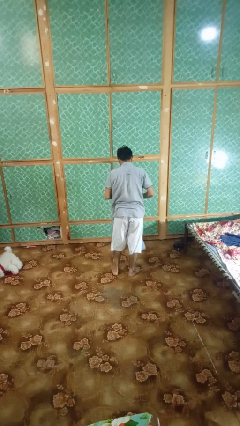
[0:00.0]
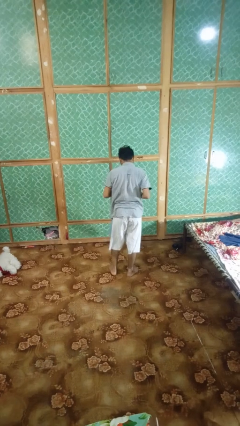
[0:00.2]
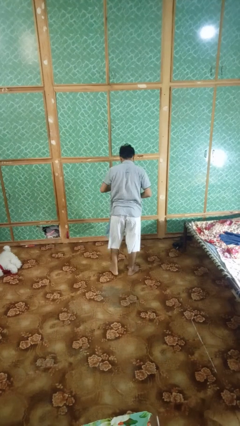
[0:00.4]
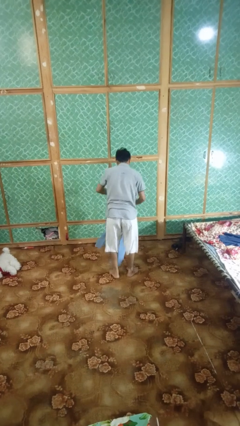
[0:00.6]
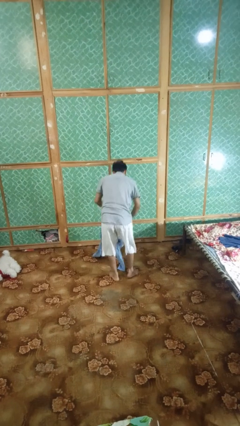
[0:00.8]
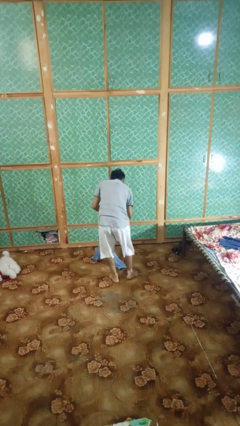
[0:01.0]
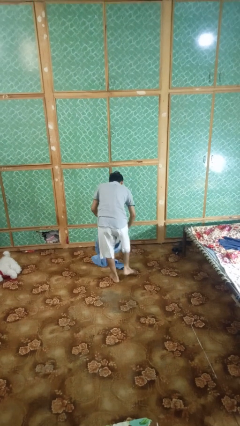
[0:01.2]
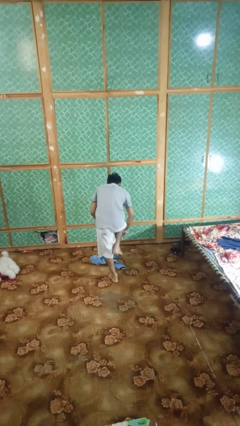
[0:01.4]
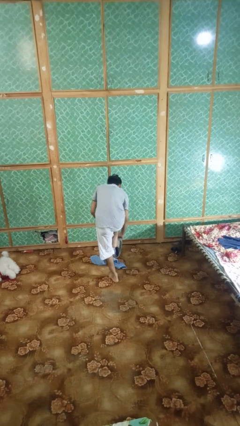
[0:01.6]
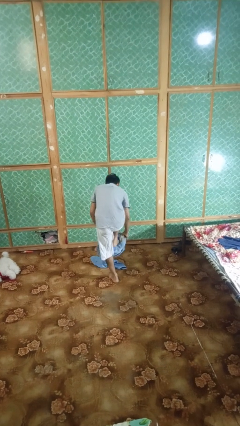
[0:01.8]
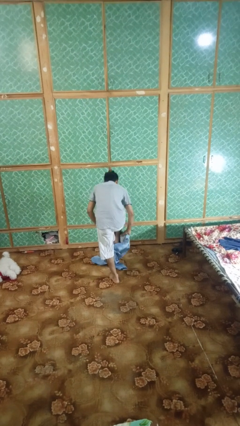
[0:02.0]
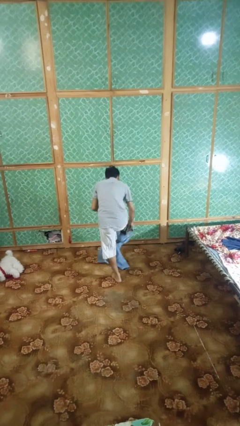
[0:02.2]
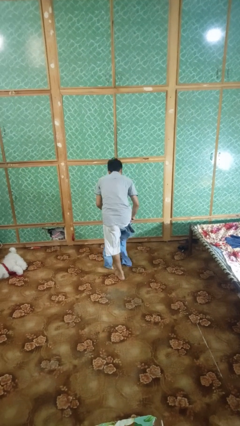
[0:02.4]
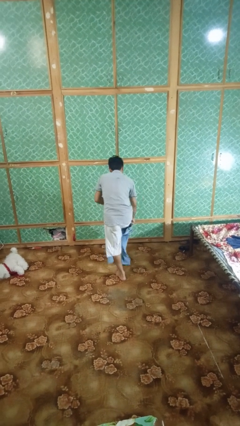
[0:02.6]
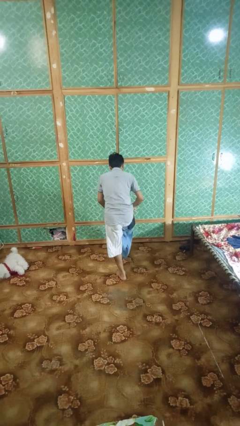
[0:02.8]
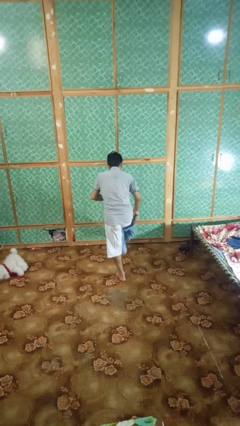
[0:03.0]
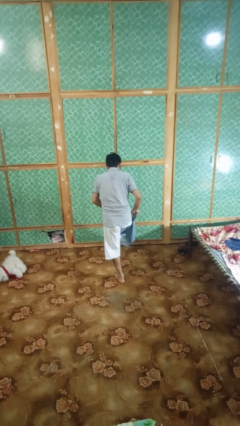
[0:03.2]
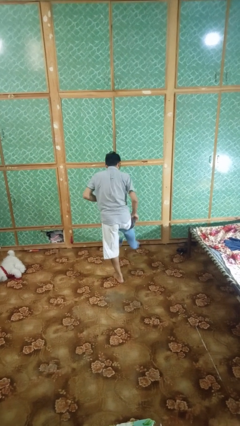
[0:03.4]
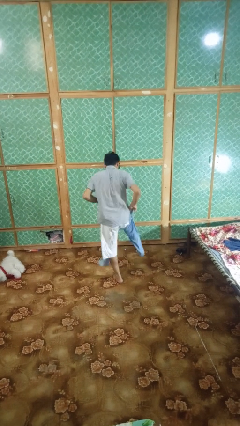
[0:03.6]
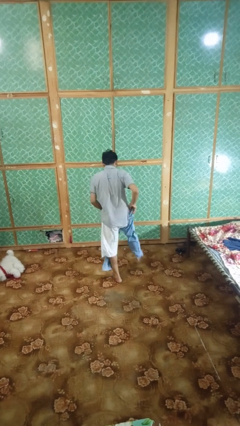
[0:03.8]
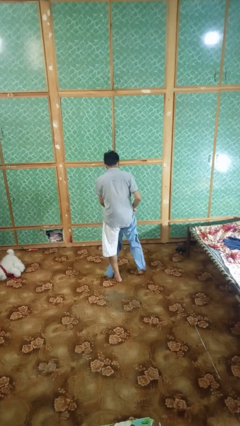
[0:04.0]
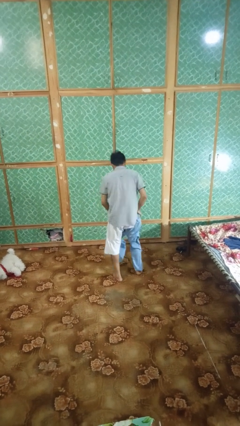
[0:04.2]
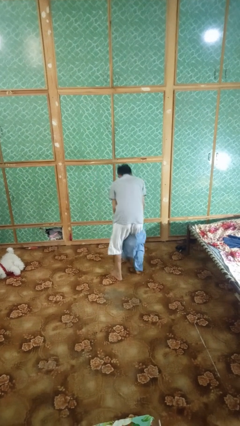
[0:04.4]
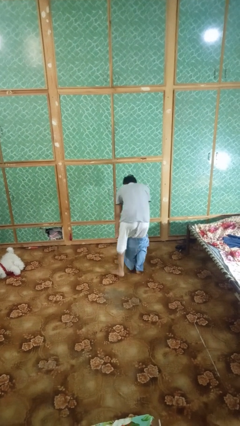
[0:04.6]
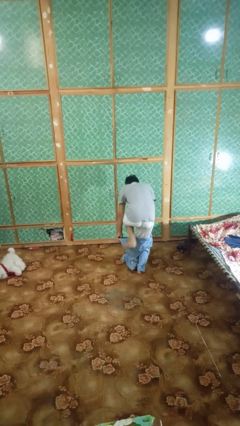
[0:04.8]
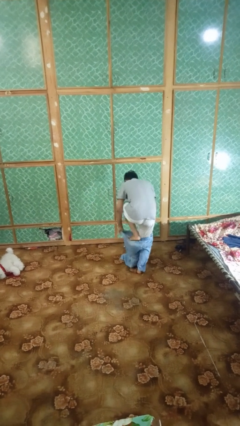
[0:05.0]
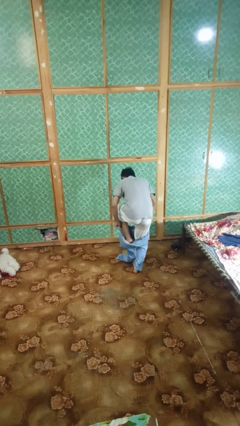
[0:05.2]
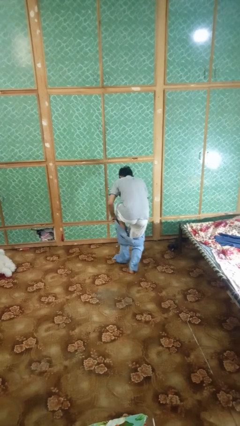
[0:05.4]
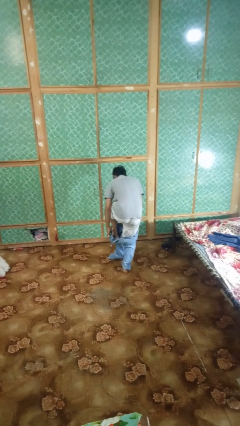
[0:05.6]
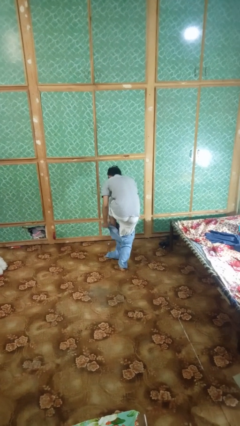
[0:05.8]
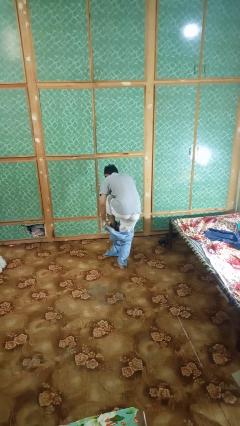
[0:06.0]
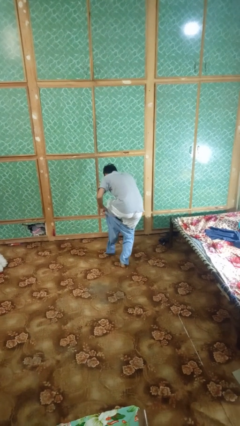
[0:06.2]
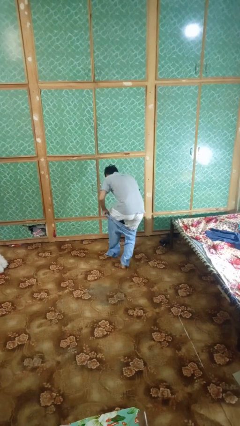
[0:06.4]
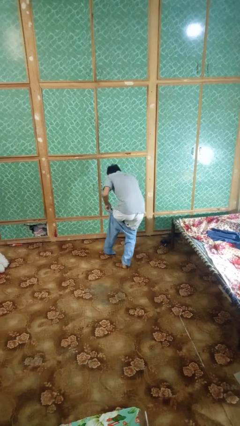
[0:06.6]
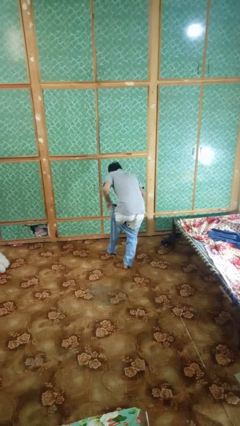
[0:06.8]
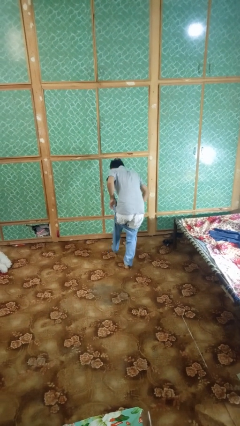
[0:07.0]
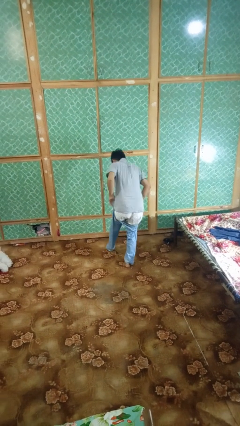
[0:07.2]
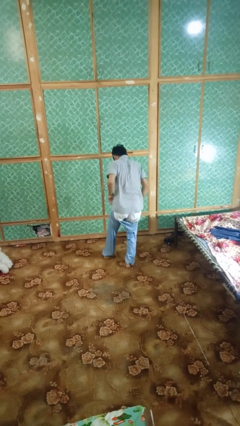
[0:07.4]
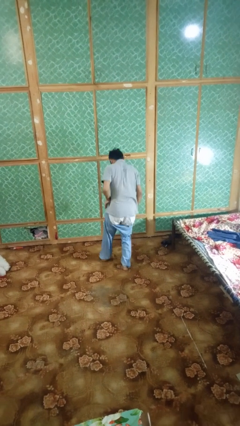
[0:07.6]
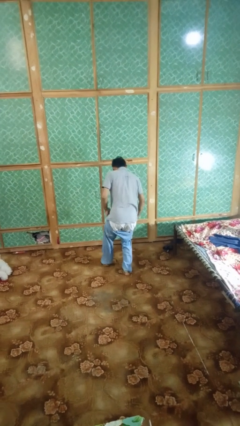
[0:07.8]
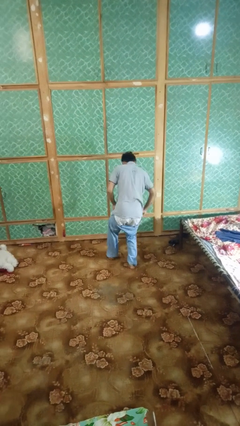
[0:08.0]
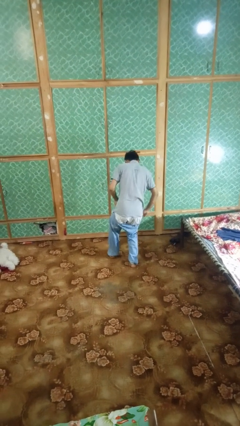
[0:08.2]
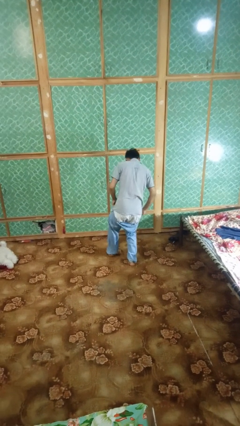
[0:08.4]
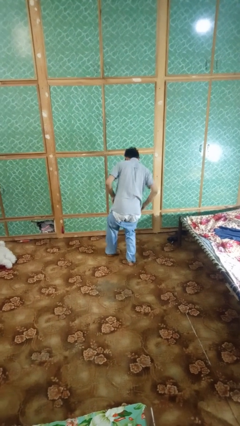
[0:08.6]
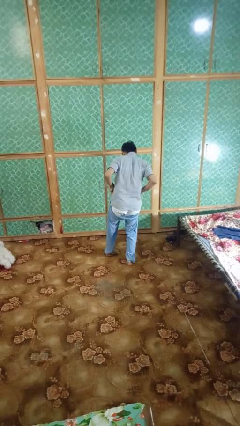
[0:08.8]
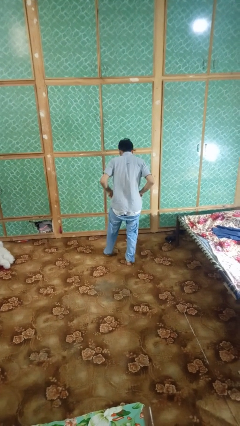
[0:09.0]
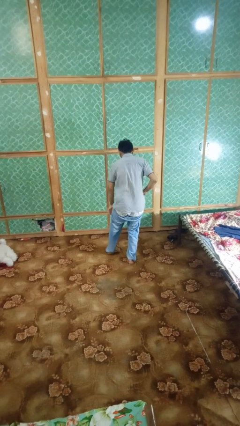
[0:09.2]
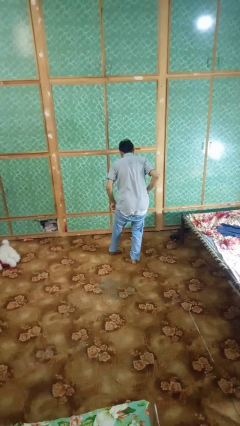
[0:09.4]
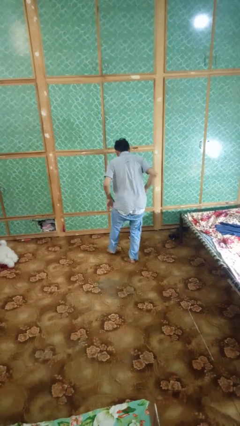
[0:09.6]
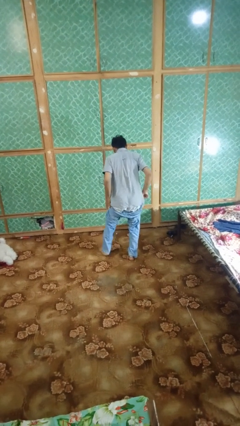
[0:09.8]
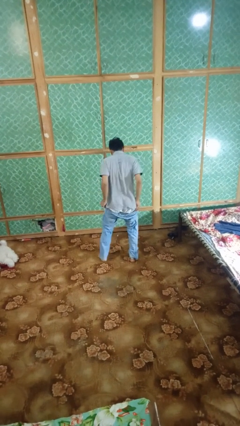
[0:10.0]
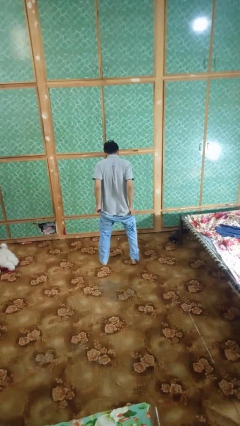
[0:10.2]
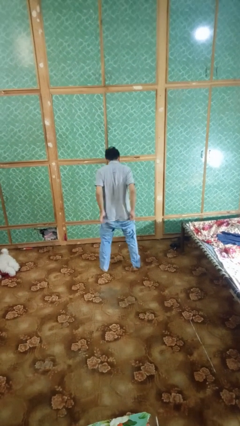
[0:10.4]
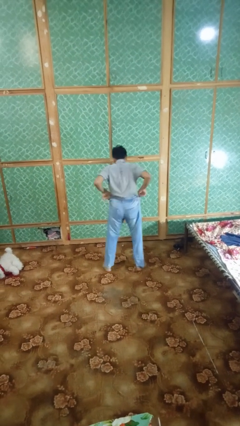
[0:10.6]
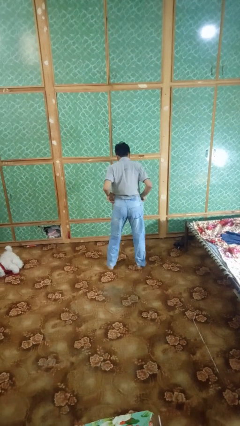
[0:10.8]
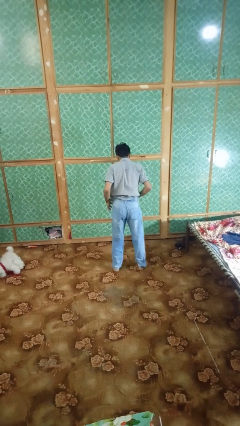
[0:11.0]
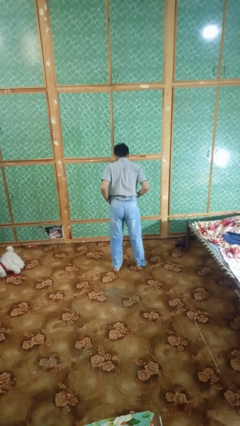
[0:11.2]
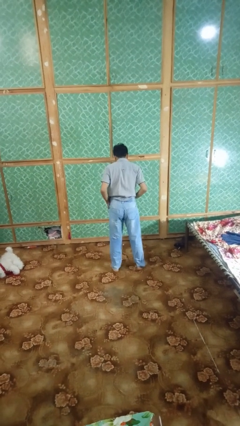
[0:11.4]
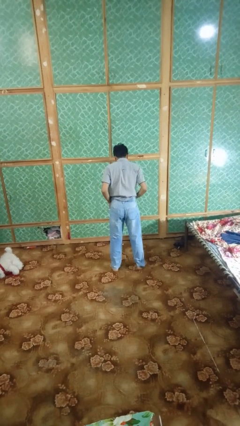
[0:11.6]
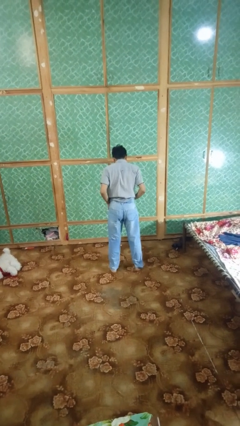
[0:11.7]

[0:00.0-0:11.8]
person puts on pants

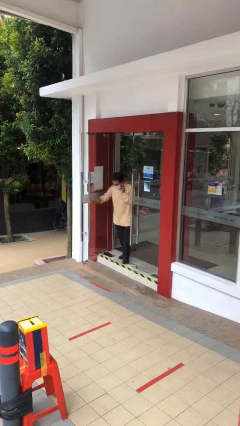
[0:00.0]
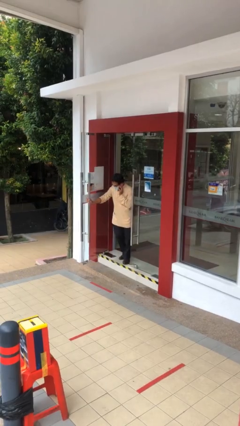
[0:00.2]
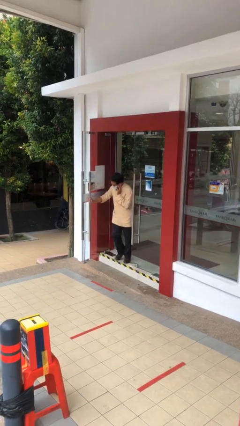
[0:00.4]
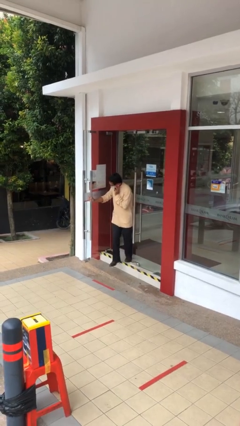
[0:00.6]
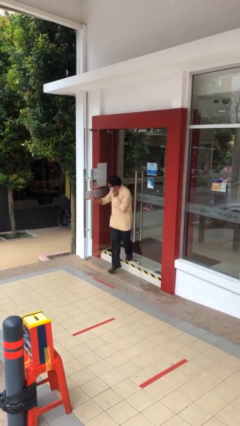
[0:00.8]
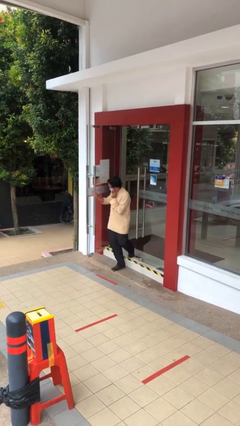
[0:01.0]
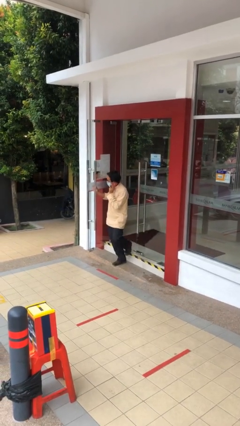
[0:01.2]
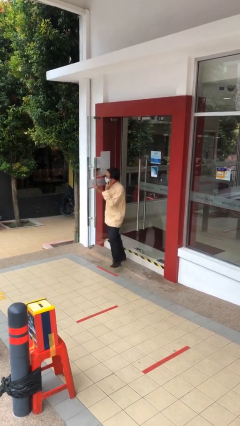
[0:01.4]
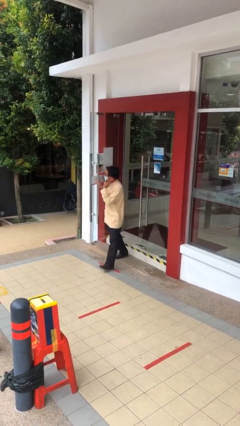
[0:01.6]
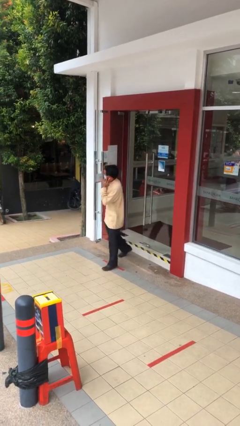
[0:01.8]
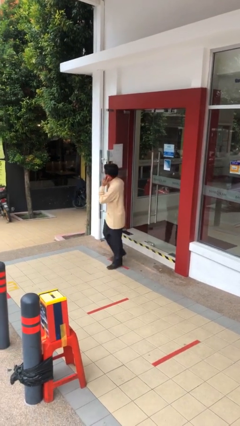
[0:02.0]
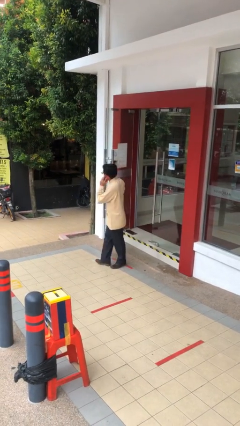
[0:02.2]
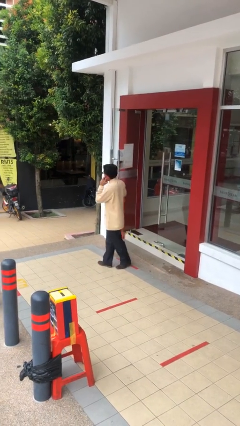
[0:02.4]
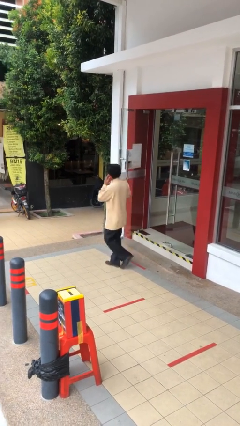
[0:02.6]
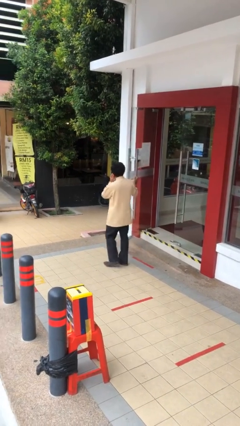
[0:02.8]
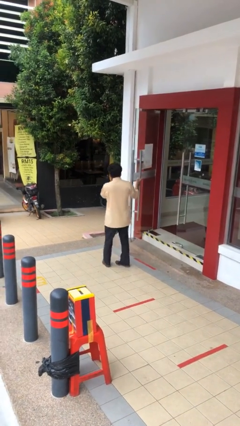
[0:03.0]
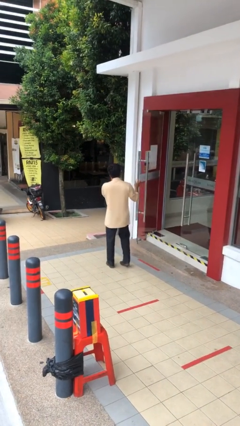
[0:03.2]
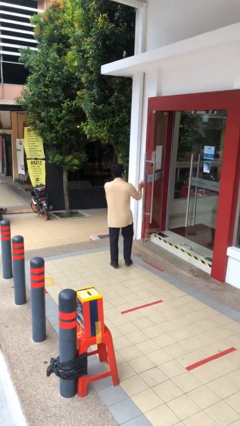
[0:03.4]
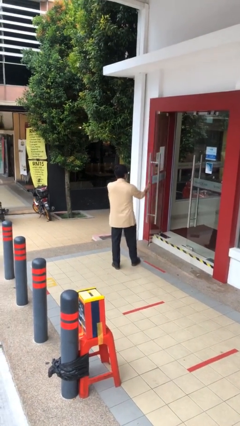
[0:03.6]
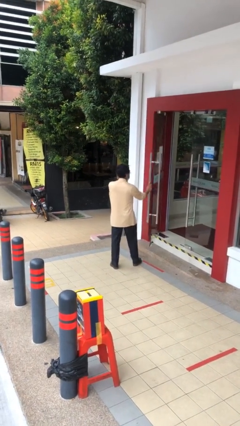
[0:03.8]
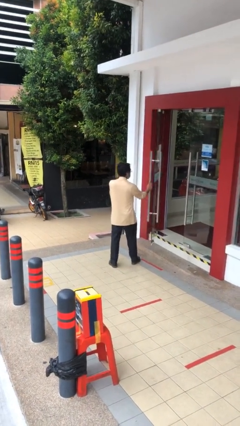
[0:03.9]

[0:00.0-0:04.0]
person enters scene through structure

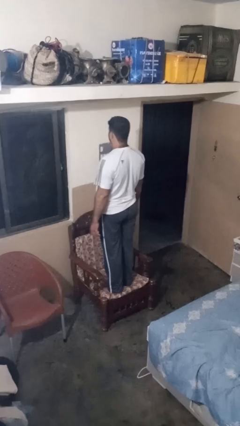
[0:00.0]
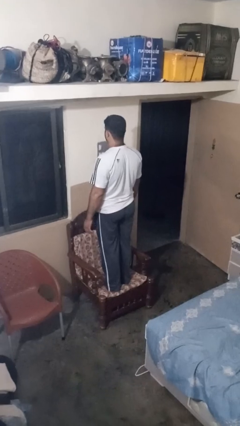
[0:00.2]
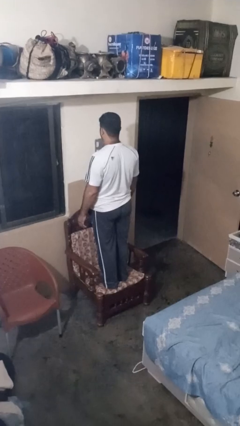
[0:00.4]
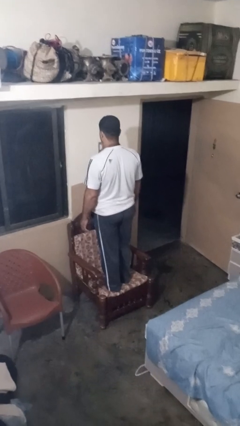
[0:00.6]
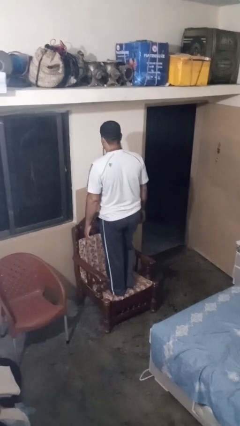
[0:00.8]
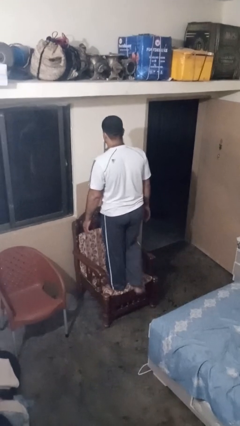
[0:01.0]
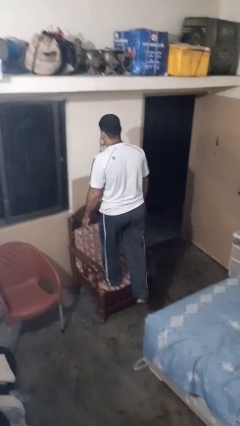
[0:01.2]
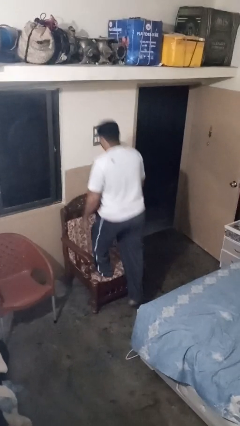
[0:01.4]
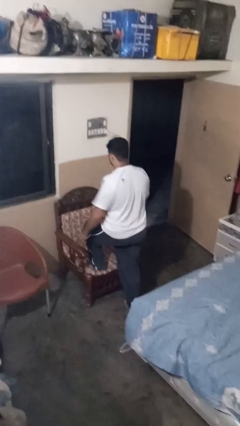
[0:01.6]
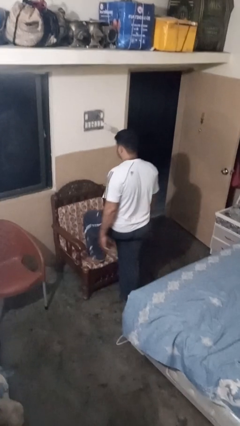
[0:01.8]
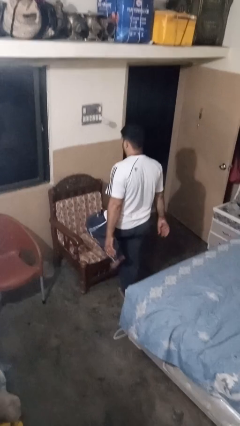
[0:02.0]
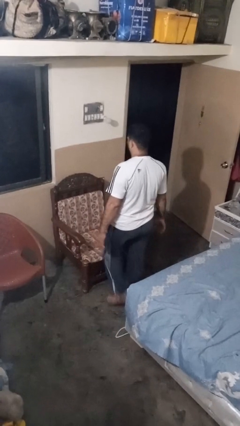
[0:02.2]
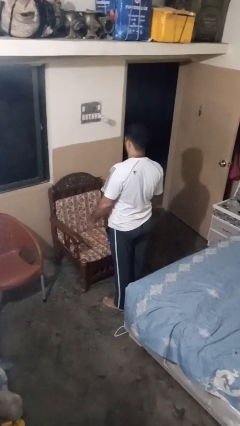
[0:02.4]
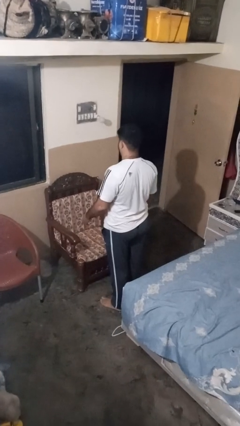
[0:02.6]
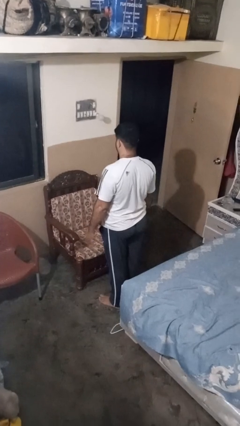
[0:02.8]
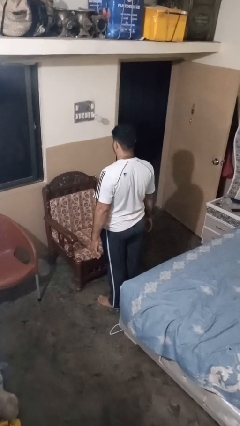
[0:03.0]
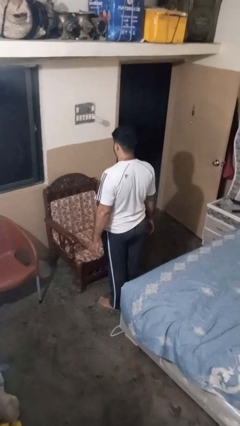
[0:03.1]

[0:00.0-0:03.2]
person climbs off couch
